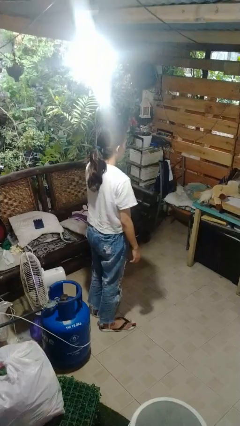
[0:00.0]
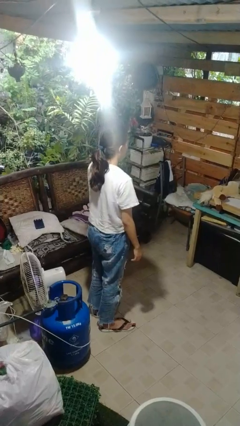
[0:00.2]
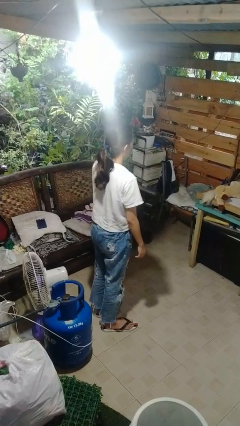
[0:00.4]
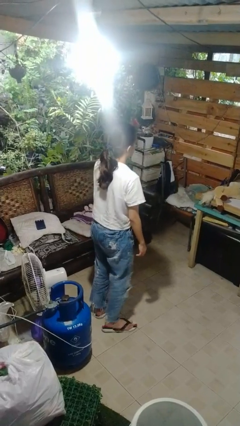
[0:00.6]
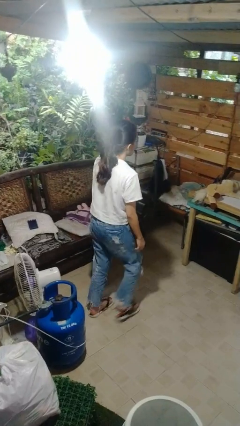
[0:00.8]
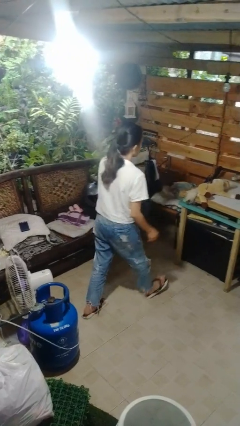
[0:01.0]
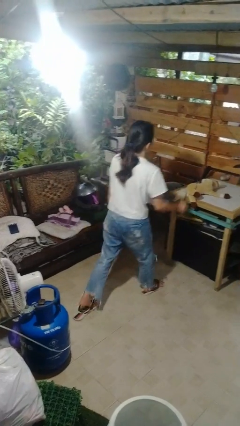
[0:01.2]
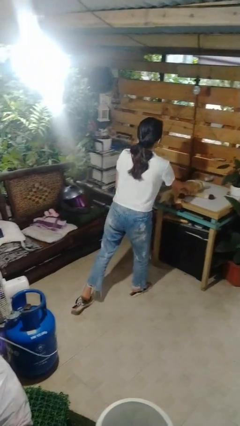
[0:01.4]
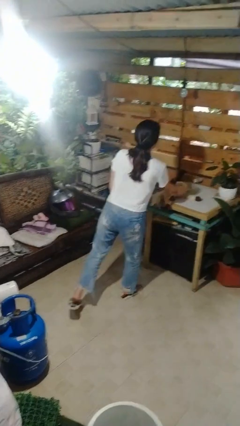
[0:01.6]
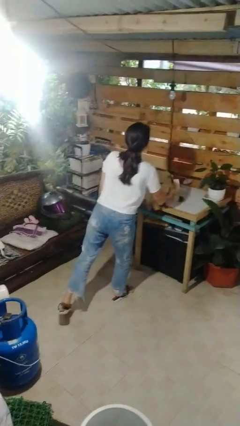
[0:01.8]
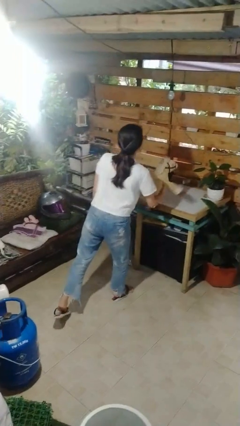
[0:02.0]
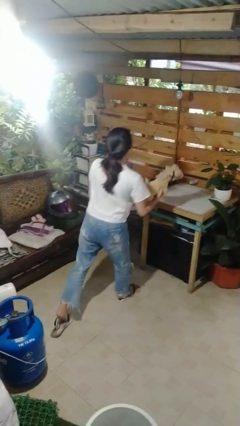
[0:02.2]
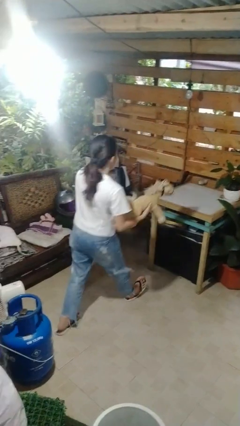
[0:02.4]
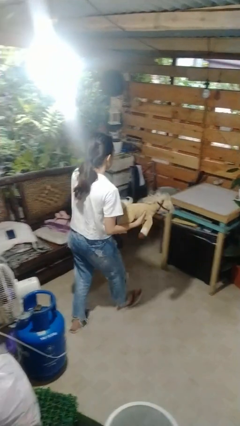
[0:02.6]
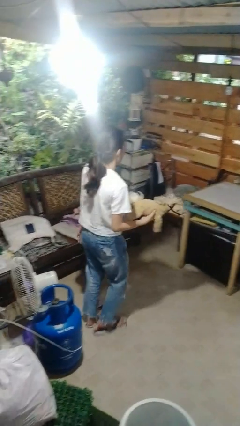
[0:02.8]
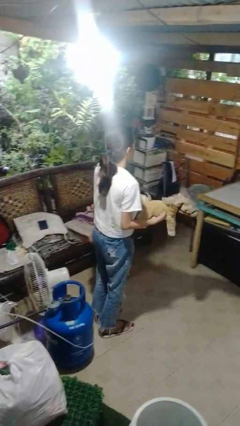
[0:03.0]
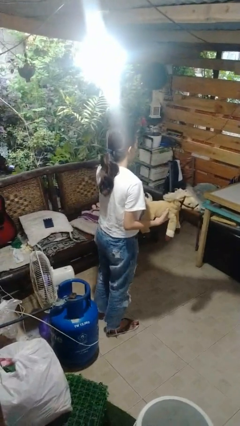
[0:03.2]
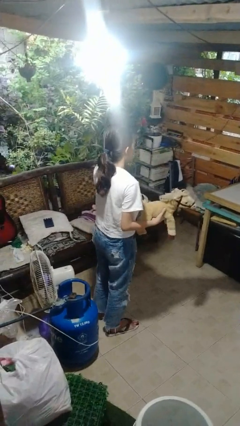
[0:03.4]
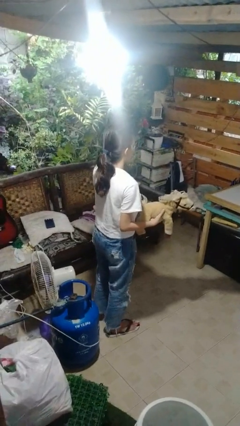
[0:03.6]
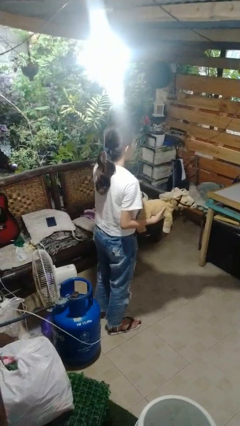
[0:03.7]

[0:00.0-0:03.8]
person picks up object from table

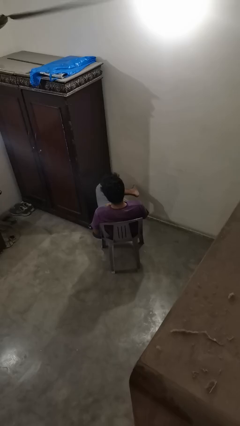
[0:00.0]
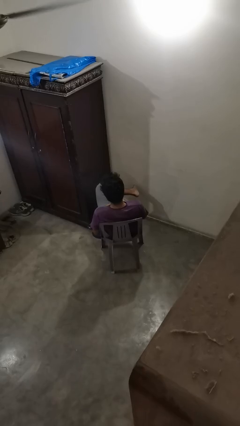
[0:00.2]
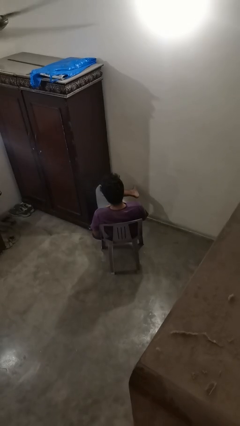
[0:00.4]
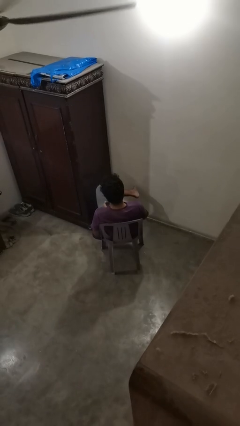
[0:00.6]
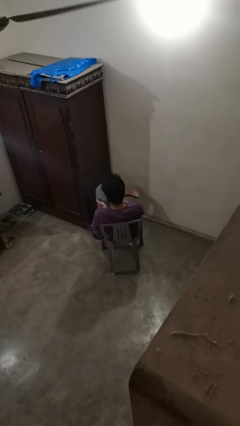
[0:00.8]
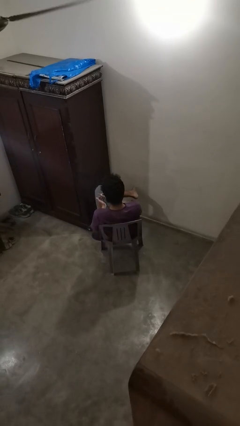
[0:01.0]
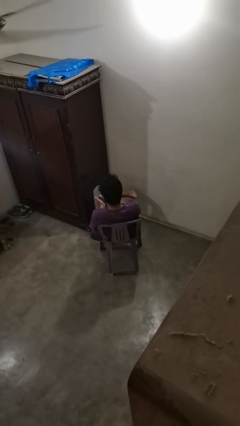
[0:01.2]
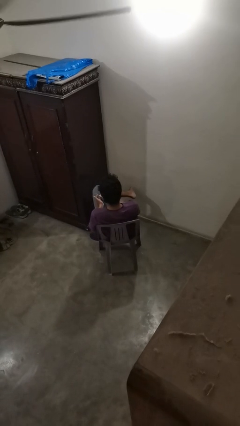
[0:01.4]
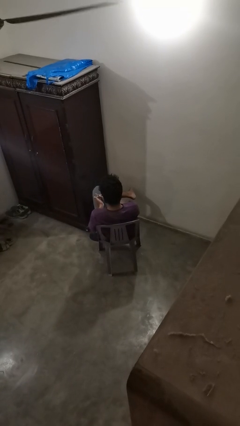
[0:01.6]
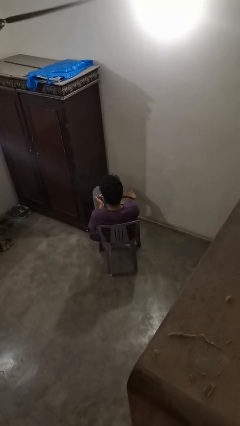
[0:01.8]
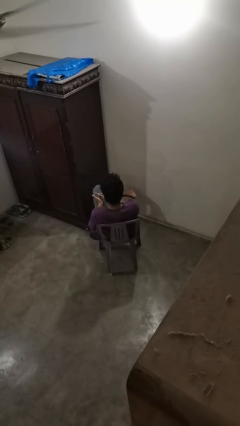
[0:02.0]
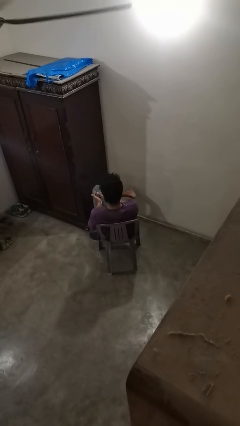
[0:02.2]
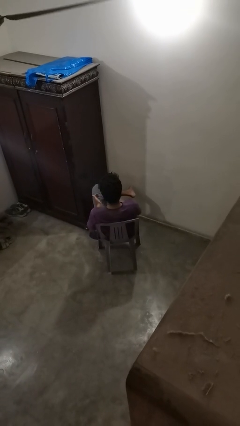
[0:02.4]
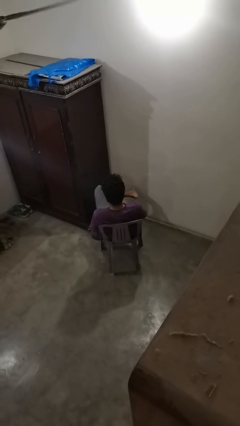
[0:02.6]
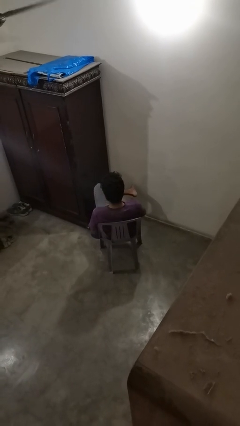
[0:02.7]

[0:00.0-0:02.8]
person files fingernails

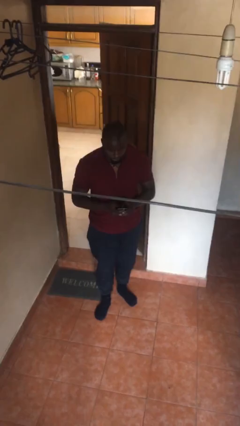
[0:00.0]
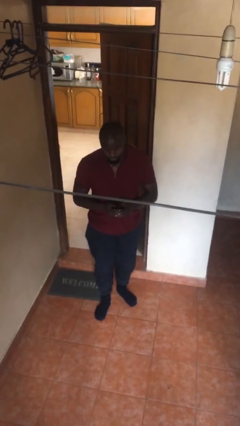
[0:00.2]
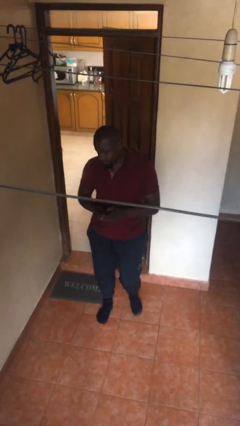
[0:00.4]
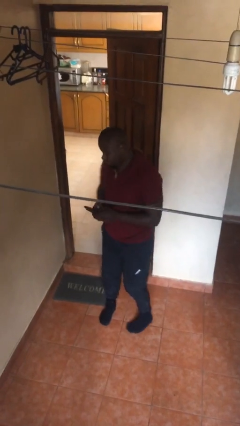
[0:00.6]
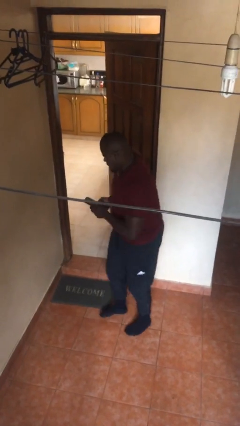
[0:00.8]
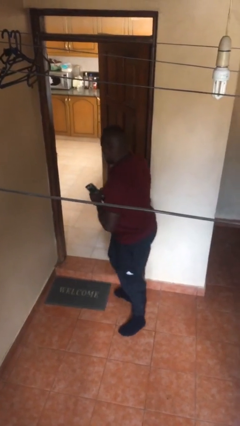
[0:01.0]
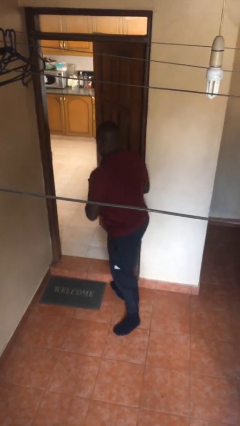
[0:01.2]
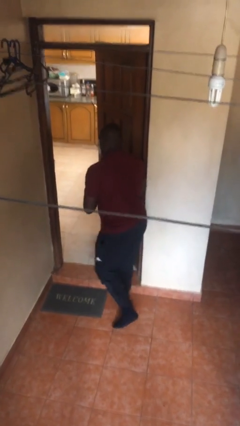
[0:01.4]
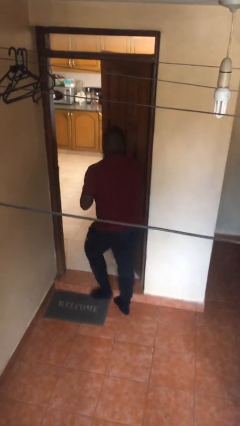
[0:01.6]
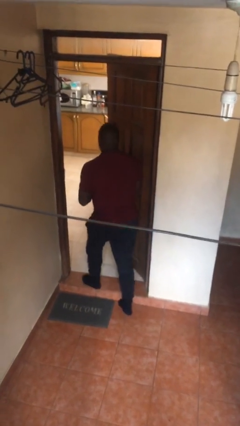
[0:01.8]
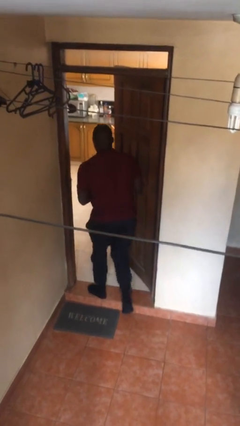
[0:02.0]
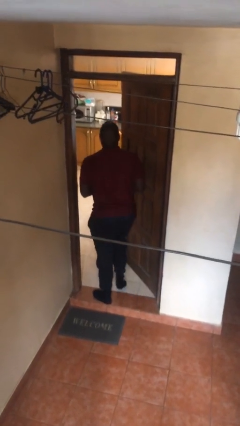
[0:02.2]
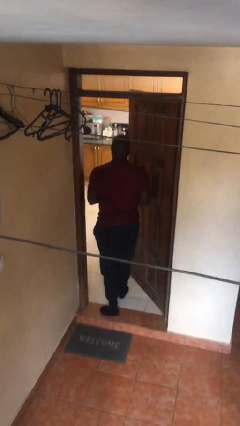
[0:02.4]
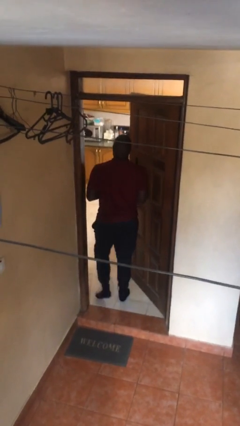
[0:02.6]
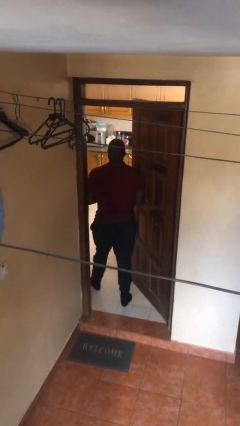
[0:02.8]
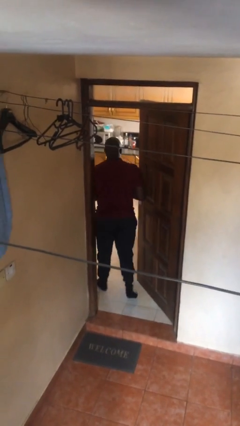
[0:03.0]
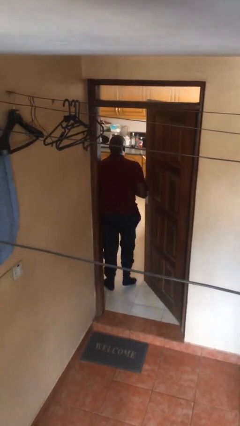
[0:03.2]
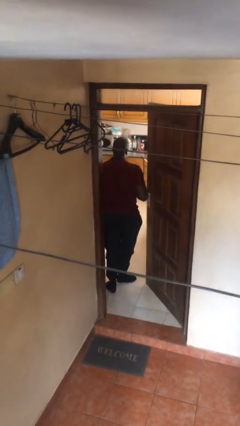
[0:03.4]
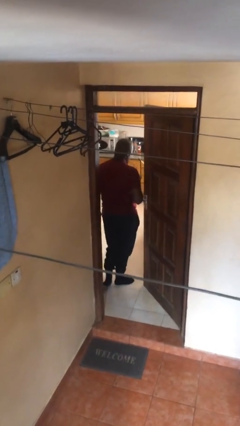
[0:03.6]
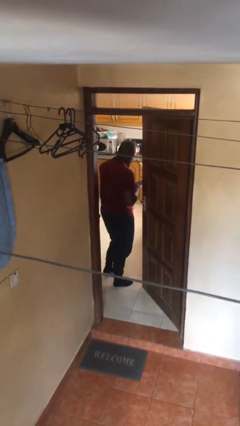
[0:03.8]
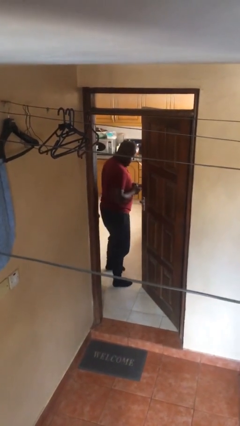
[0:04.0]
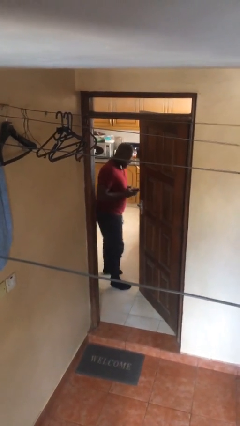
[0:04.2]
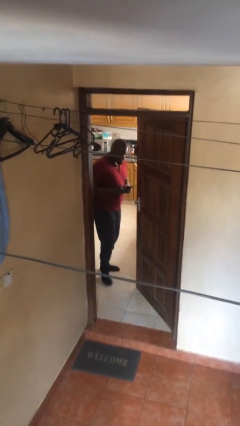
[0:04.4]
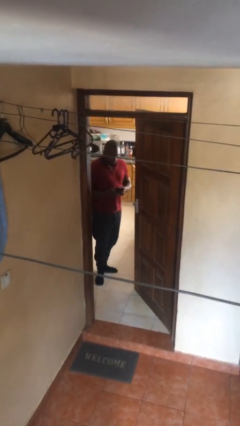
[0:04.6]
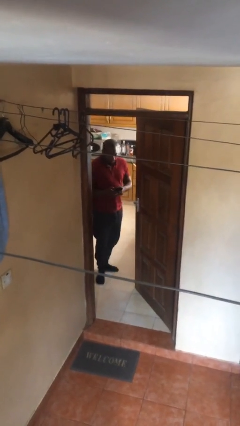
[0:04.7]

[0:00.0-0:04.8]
person exits scene through structure

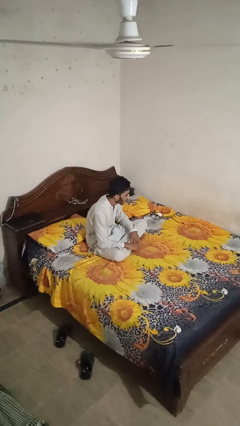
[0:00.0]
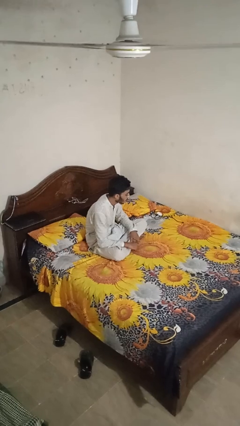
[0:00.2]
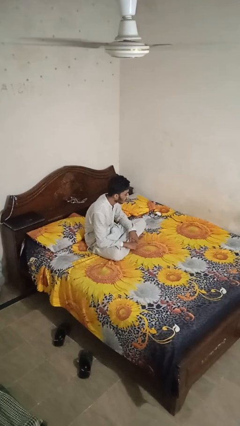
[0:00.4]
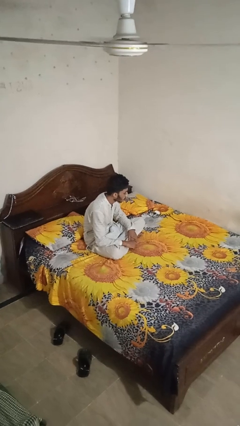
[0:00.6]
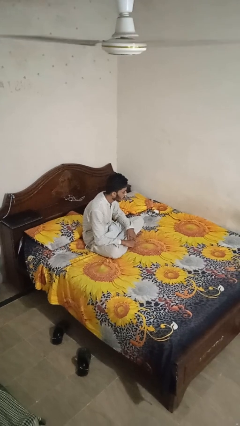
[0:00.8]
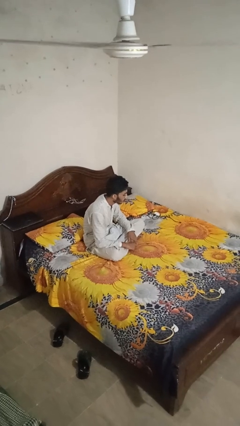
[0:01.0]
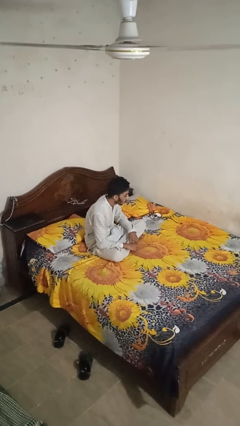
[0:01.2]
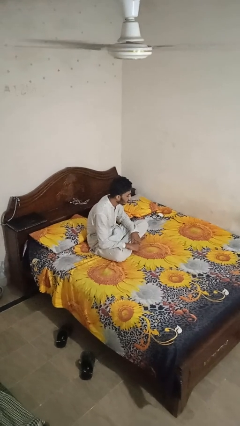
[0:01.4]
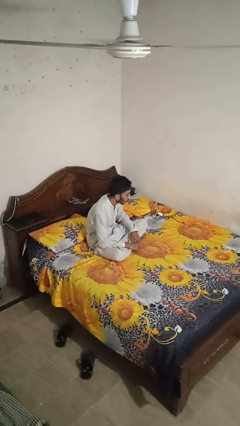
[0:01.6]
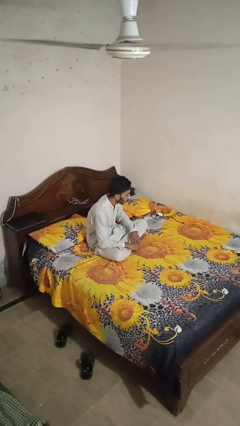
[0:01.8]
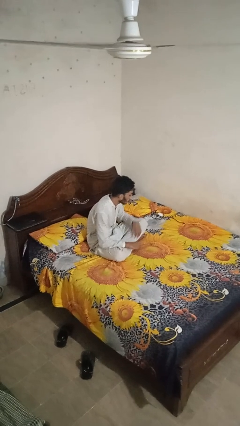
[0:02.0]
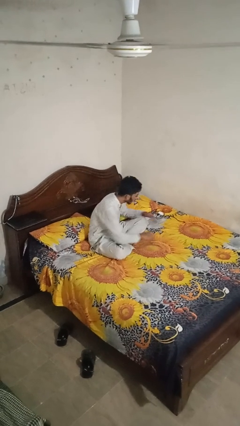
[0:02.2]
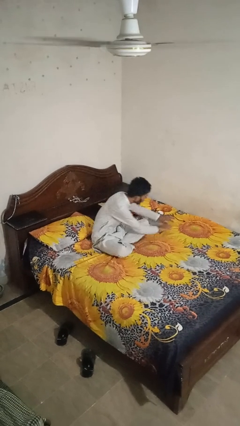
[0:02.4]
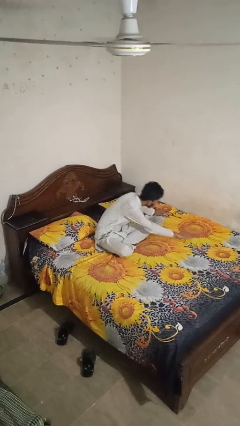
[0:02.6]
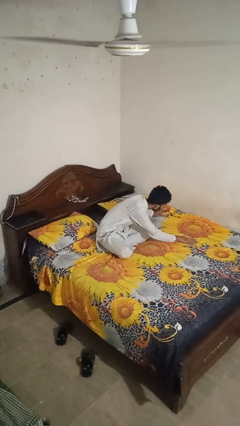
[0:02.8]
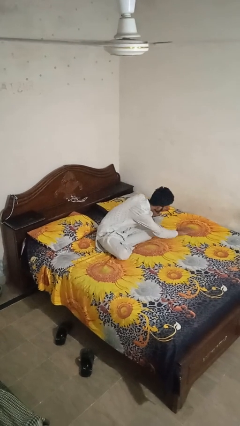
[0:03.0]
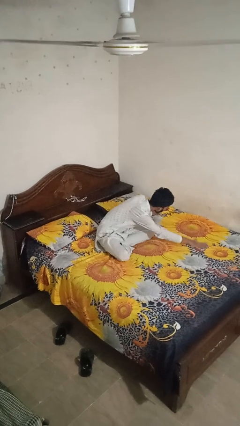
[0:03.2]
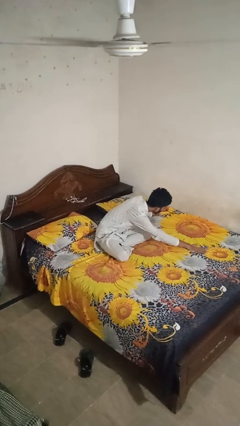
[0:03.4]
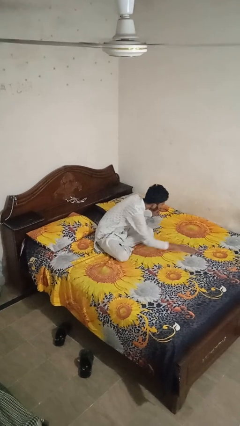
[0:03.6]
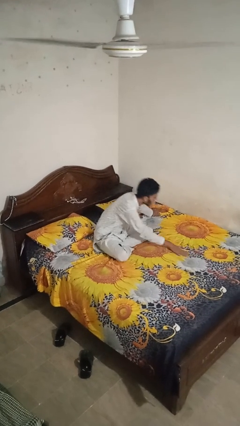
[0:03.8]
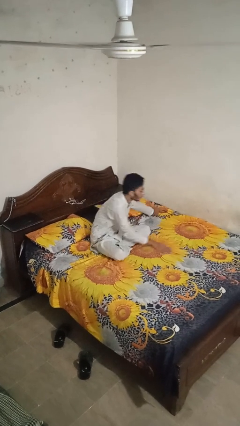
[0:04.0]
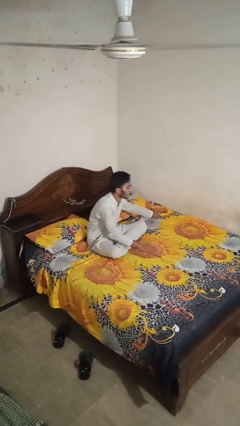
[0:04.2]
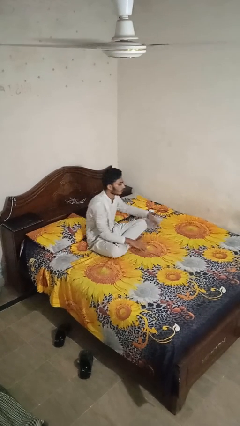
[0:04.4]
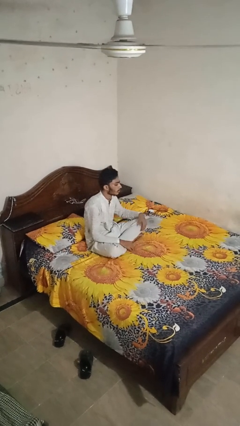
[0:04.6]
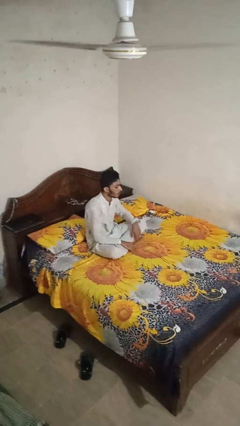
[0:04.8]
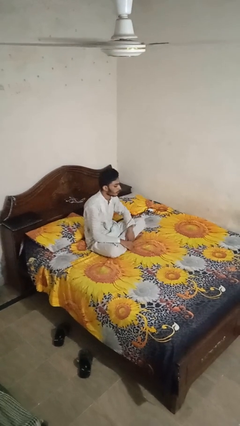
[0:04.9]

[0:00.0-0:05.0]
person searches under bed

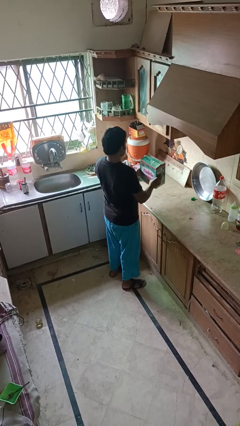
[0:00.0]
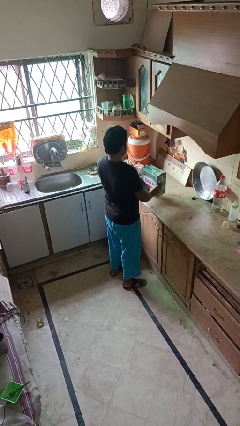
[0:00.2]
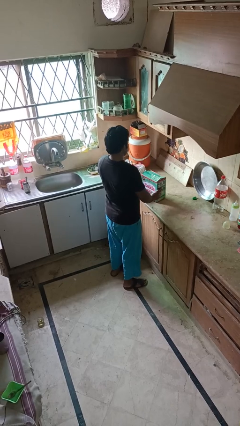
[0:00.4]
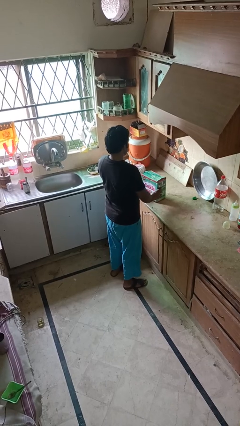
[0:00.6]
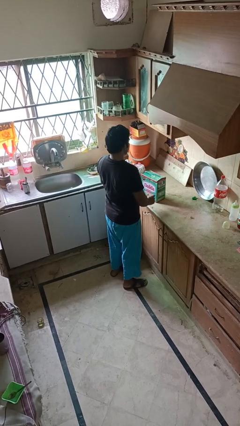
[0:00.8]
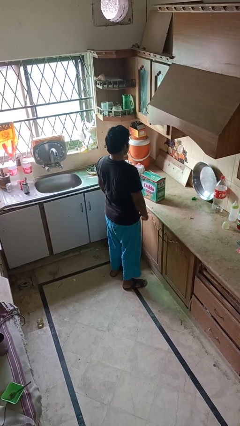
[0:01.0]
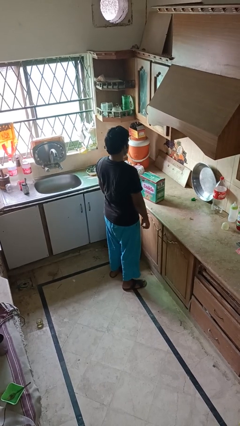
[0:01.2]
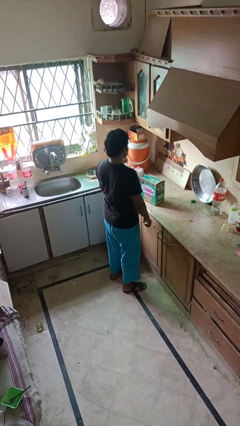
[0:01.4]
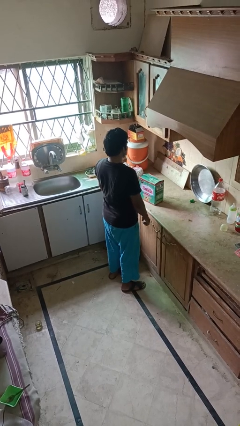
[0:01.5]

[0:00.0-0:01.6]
person puts down object on countertop
